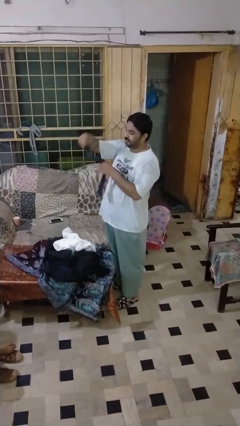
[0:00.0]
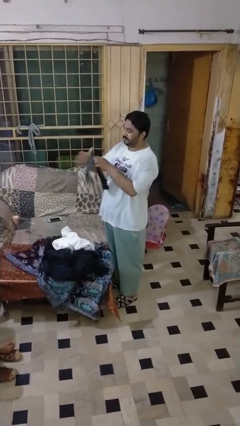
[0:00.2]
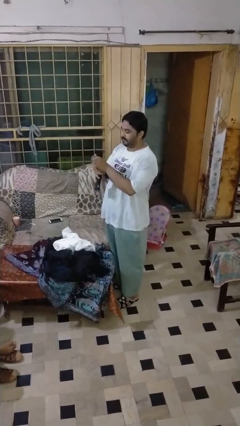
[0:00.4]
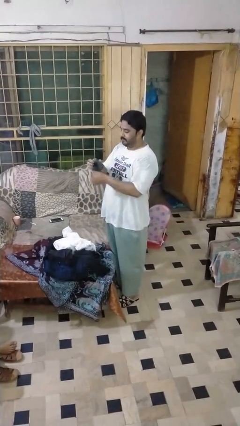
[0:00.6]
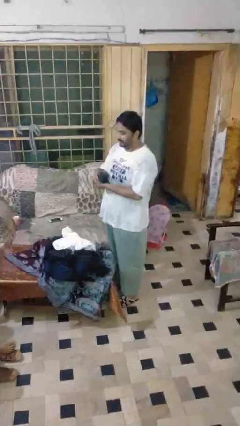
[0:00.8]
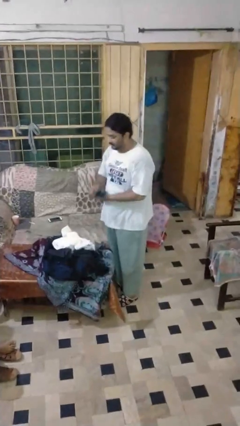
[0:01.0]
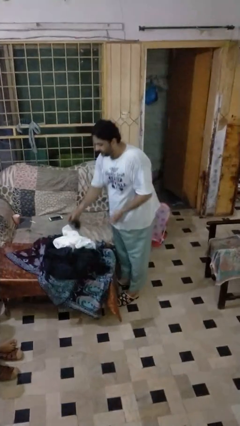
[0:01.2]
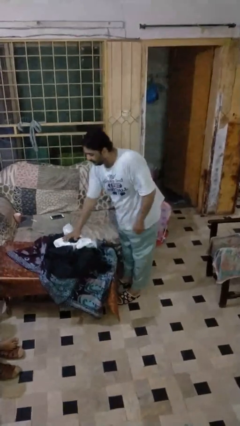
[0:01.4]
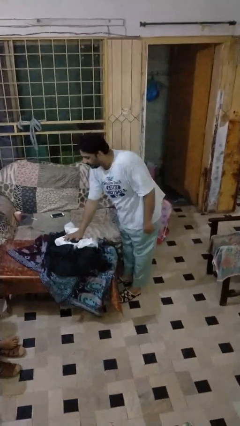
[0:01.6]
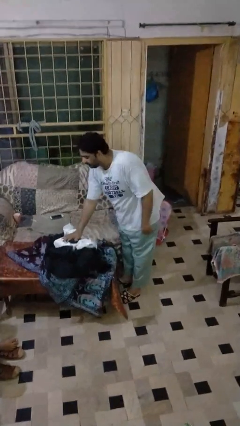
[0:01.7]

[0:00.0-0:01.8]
person folds socks

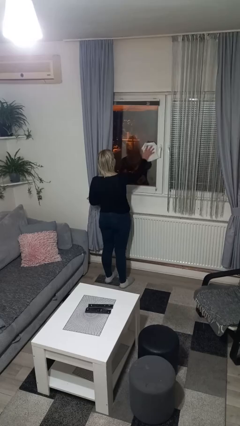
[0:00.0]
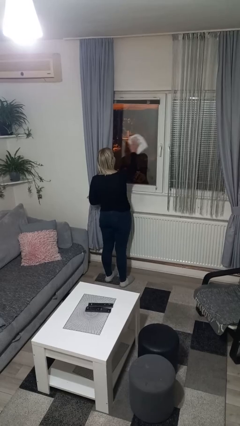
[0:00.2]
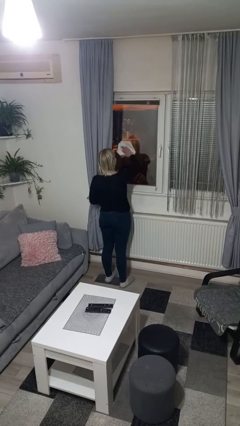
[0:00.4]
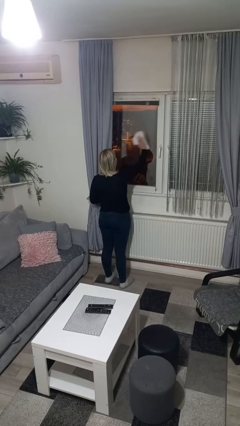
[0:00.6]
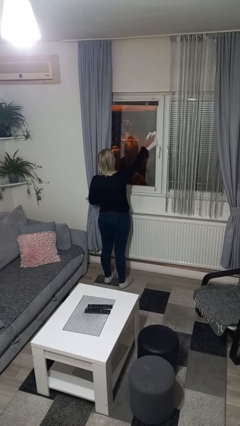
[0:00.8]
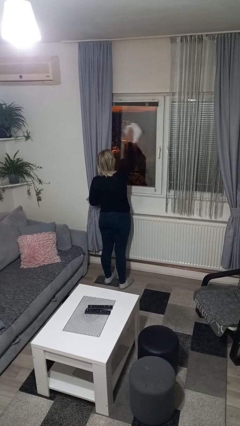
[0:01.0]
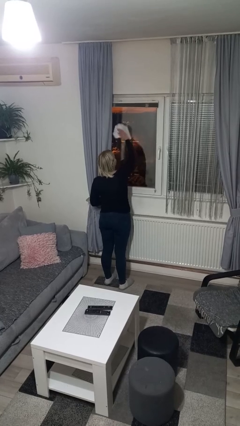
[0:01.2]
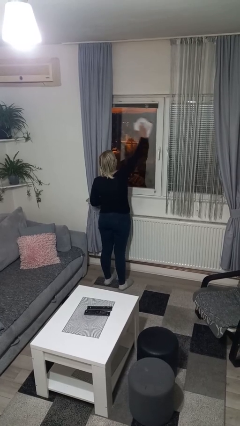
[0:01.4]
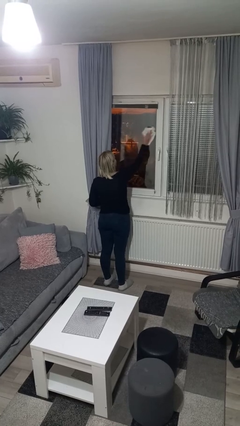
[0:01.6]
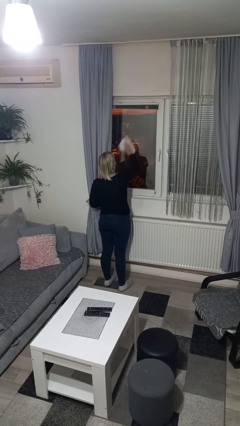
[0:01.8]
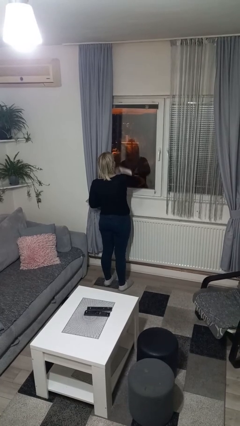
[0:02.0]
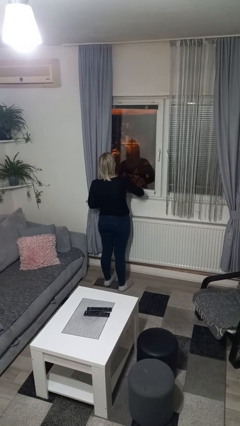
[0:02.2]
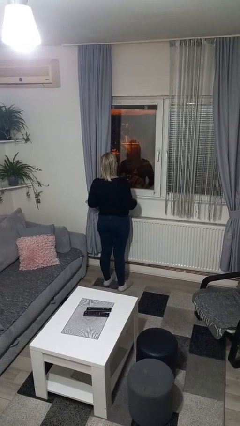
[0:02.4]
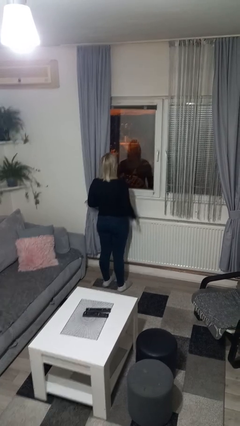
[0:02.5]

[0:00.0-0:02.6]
person washes window

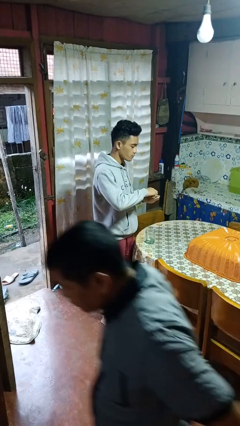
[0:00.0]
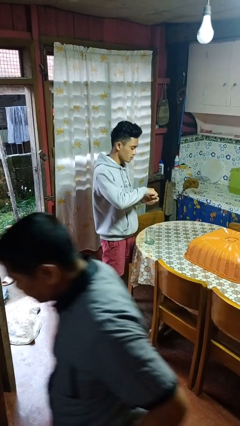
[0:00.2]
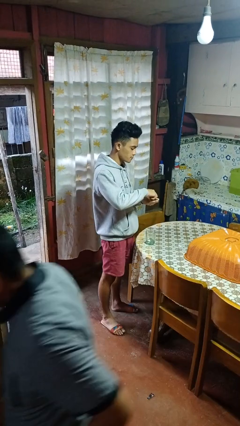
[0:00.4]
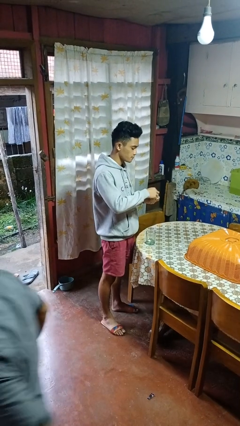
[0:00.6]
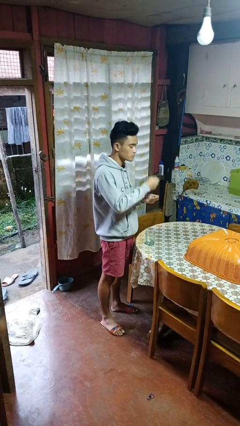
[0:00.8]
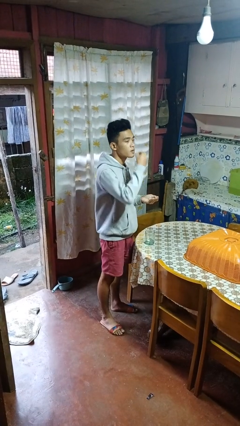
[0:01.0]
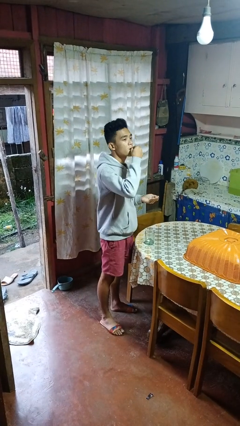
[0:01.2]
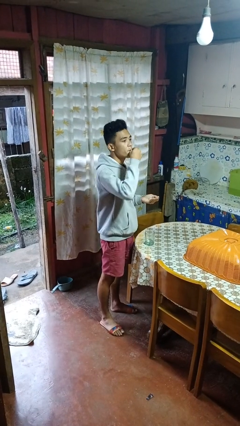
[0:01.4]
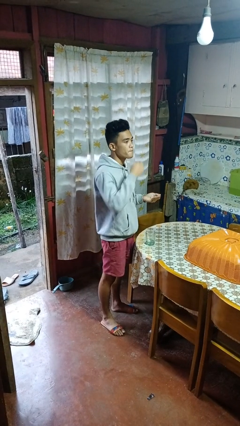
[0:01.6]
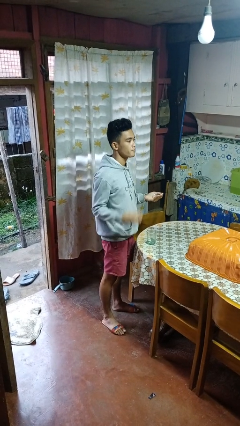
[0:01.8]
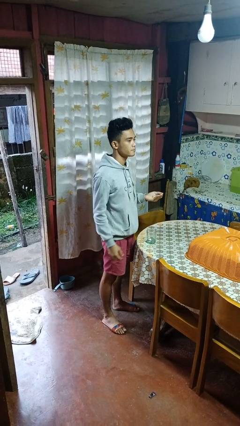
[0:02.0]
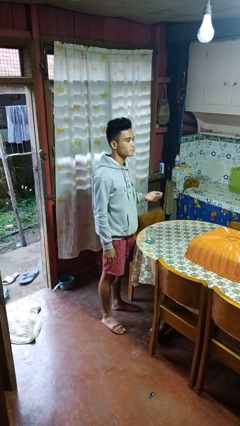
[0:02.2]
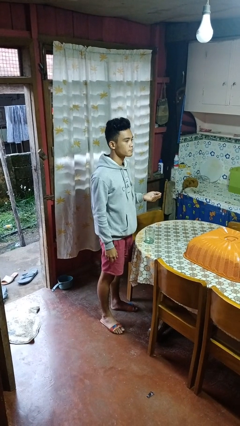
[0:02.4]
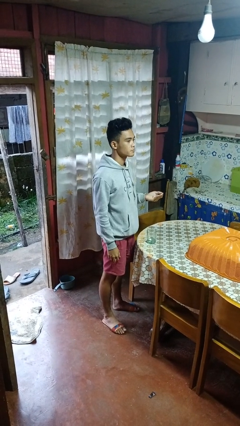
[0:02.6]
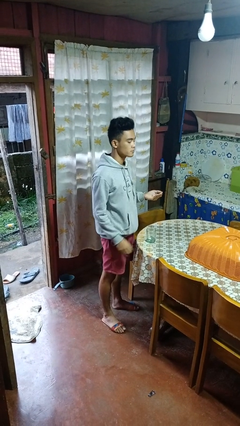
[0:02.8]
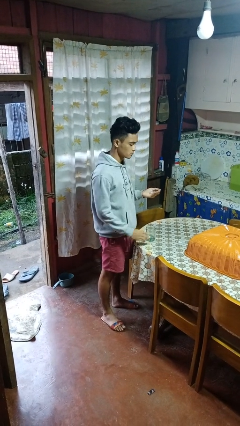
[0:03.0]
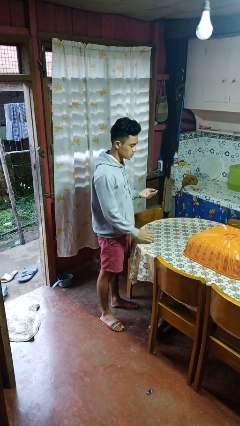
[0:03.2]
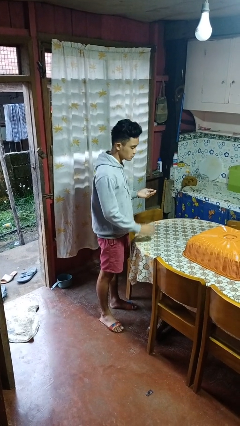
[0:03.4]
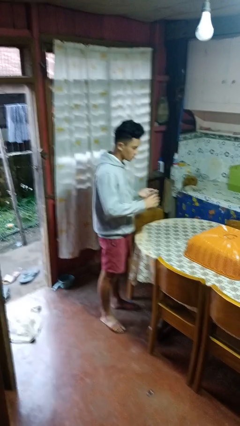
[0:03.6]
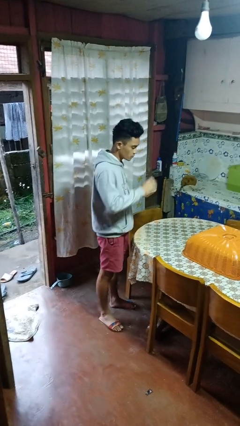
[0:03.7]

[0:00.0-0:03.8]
person takes medicine pills

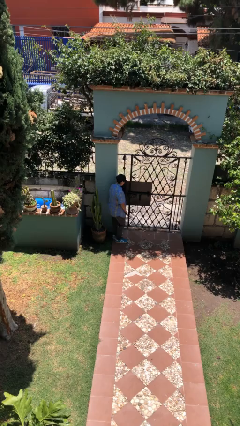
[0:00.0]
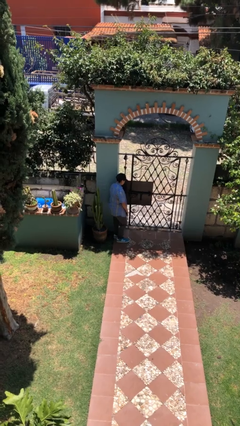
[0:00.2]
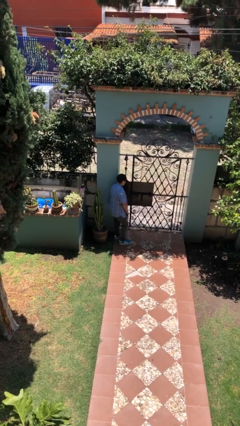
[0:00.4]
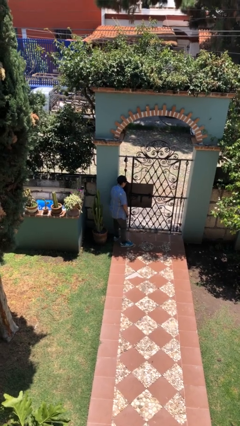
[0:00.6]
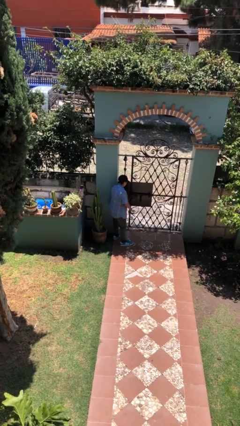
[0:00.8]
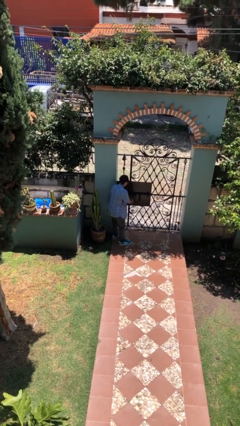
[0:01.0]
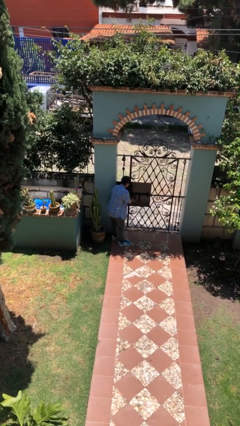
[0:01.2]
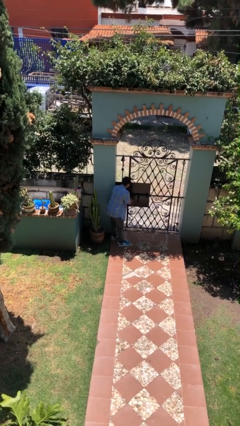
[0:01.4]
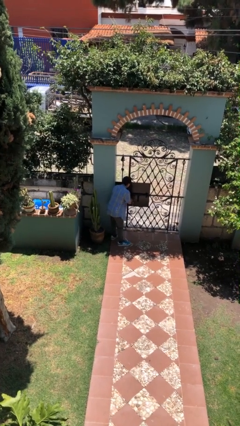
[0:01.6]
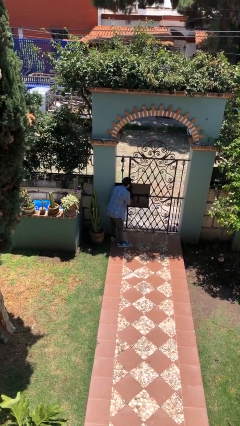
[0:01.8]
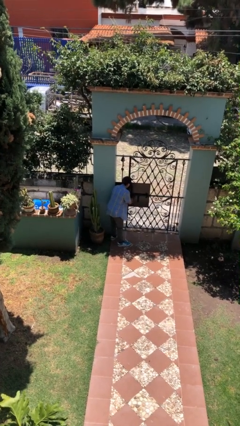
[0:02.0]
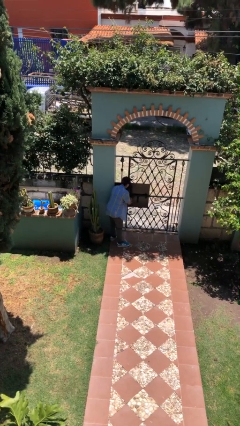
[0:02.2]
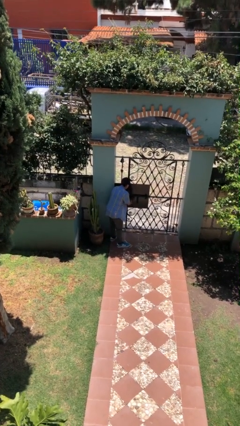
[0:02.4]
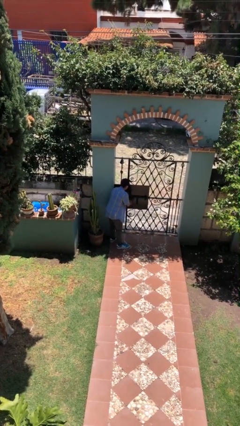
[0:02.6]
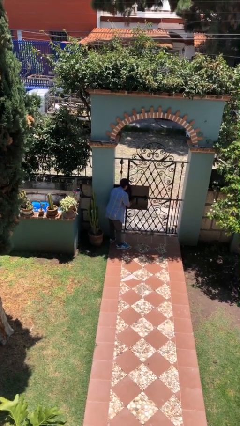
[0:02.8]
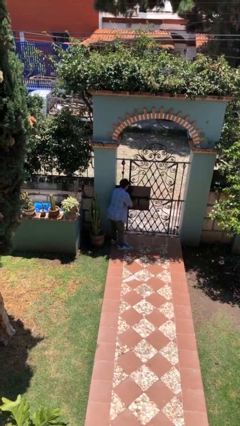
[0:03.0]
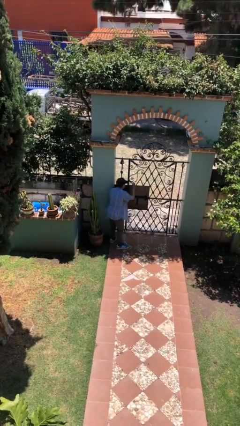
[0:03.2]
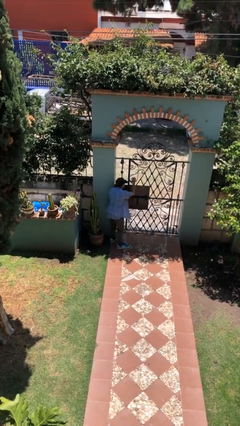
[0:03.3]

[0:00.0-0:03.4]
person unlocks door with keys

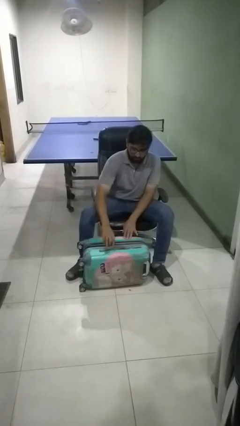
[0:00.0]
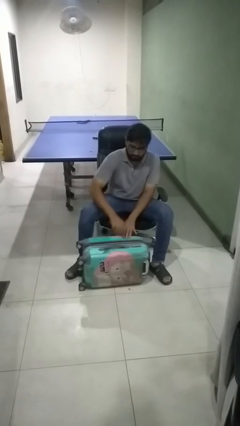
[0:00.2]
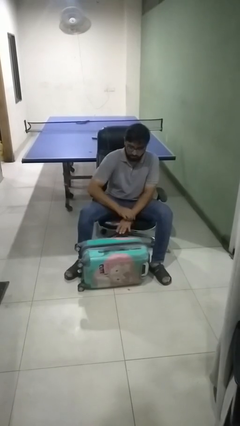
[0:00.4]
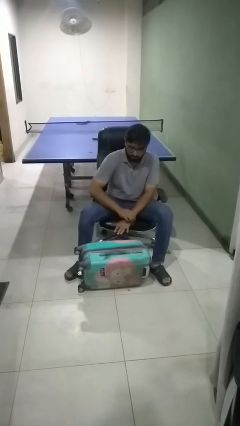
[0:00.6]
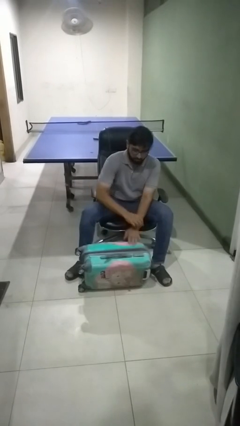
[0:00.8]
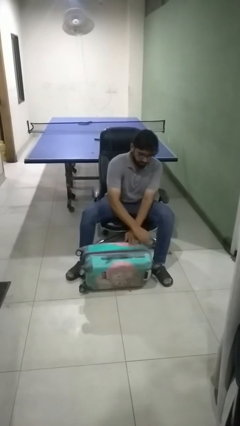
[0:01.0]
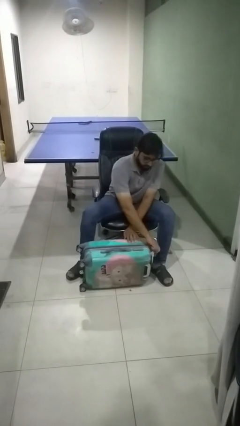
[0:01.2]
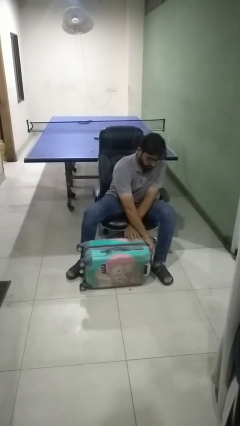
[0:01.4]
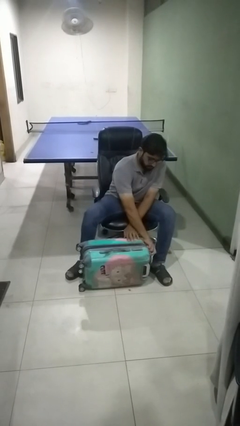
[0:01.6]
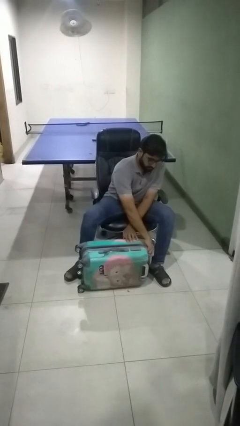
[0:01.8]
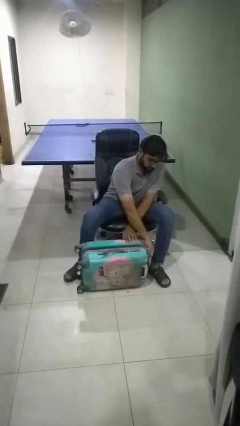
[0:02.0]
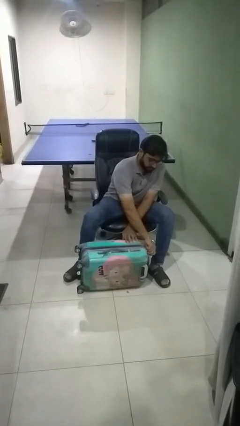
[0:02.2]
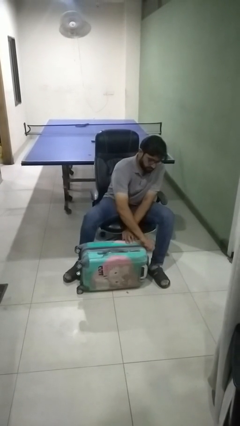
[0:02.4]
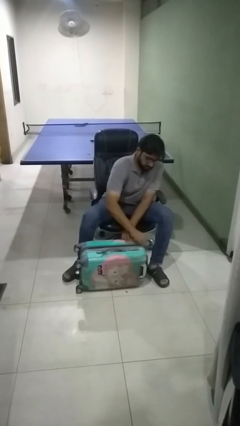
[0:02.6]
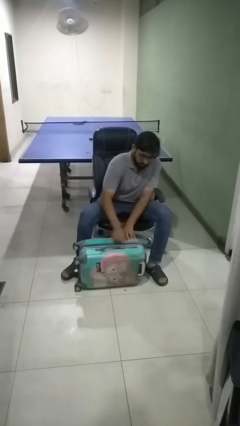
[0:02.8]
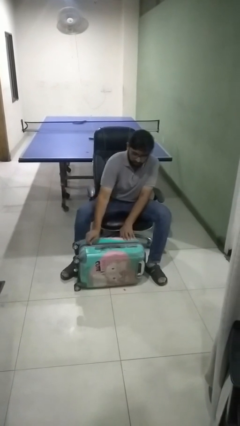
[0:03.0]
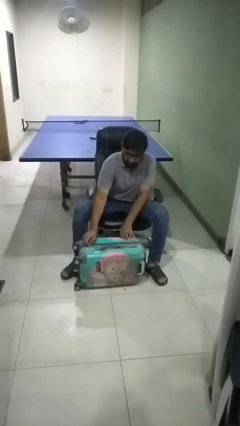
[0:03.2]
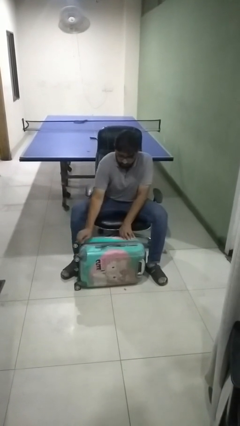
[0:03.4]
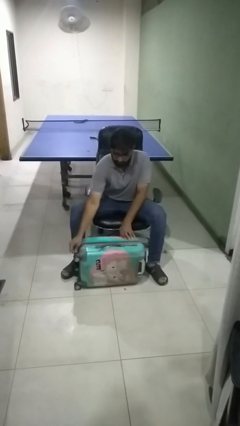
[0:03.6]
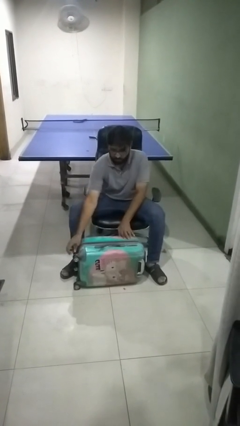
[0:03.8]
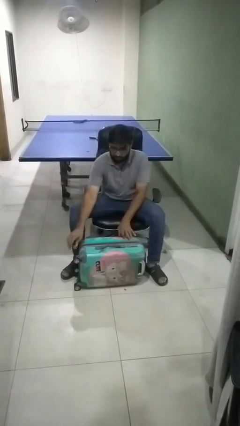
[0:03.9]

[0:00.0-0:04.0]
person closes suitcase

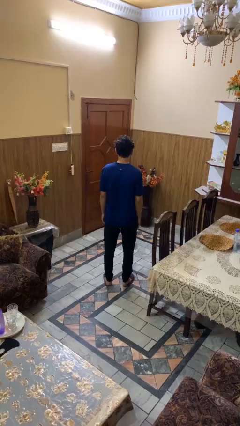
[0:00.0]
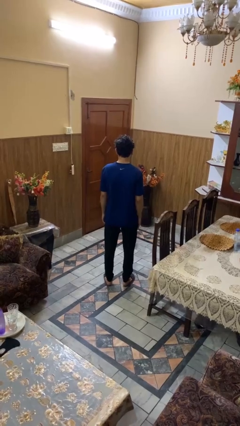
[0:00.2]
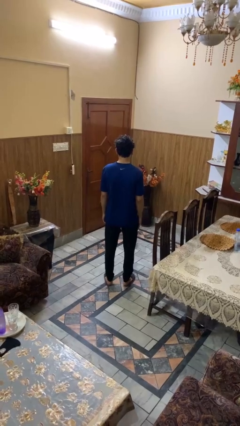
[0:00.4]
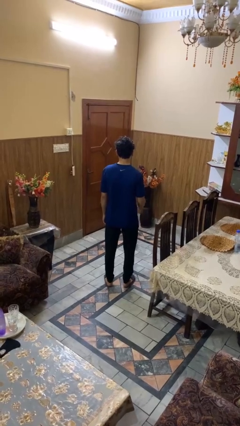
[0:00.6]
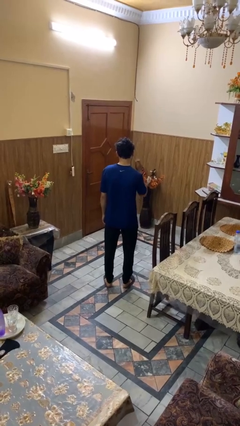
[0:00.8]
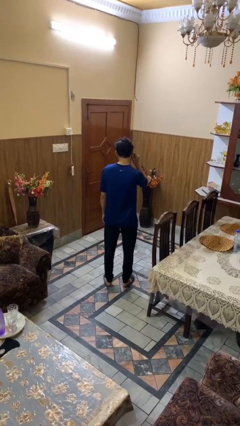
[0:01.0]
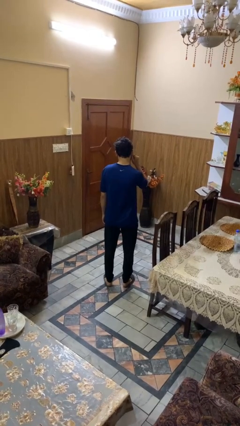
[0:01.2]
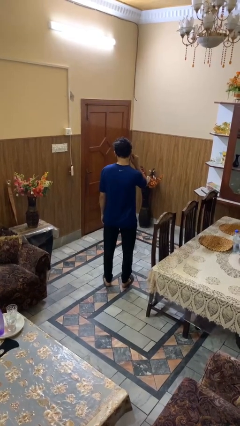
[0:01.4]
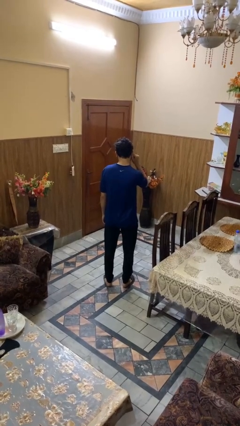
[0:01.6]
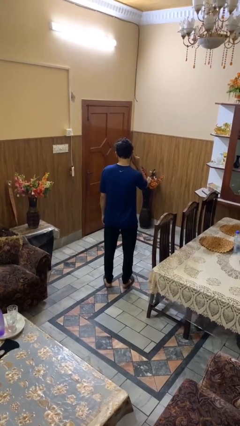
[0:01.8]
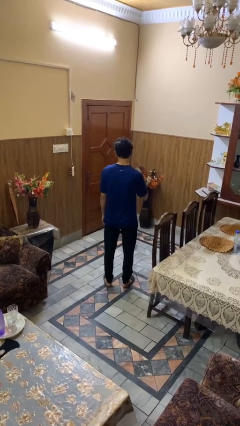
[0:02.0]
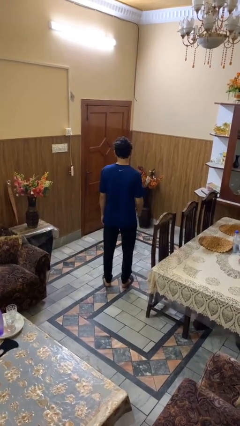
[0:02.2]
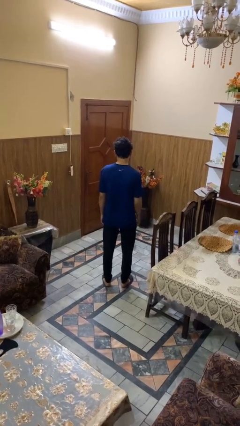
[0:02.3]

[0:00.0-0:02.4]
person touches earlobe
